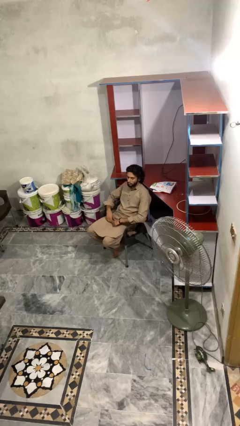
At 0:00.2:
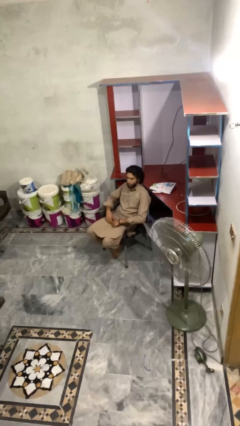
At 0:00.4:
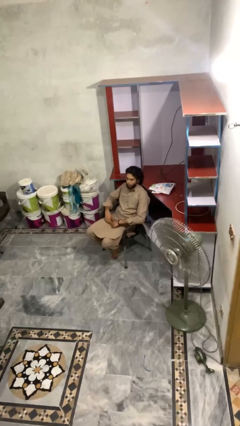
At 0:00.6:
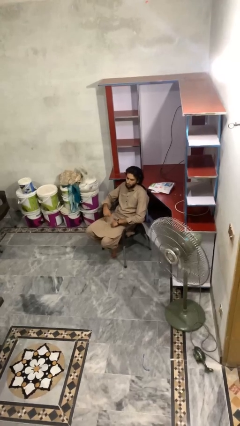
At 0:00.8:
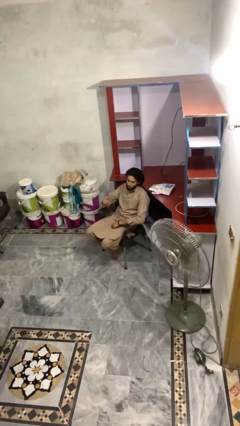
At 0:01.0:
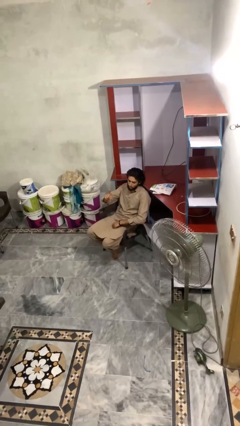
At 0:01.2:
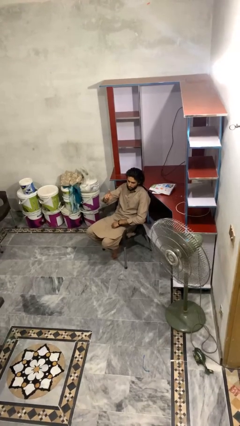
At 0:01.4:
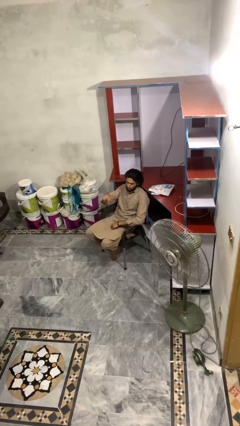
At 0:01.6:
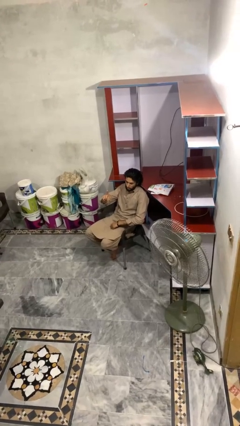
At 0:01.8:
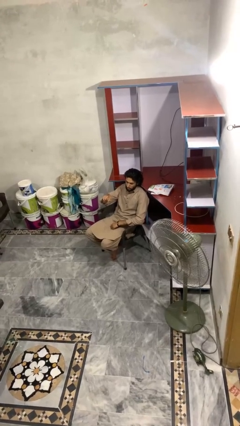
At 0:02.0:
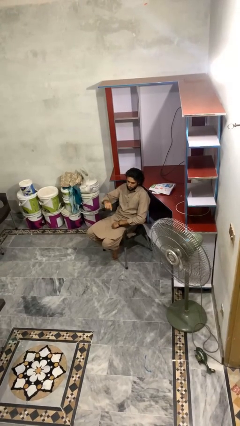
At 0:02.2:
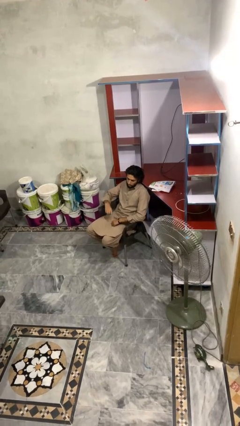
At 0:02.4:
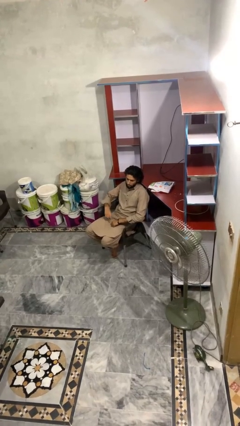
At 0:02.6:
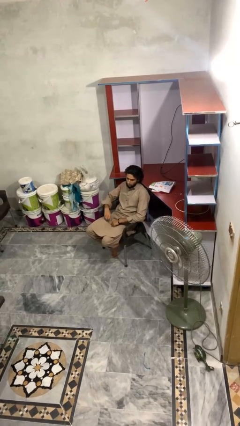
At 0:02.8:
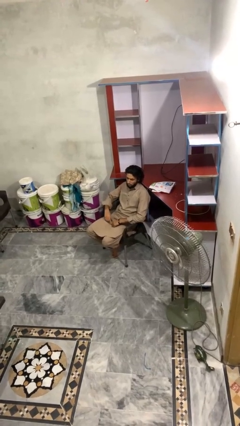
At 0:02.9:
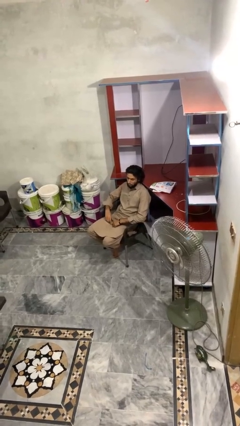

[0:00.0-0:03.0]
person gestures number one

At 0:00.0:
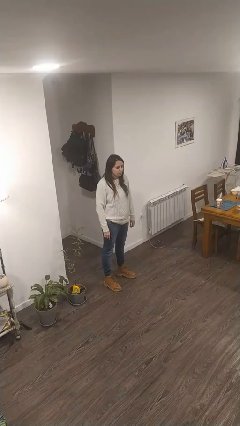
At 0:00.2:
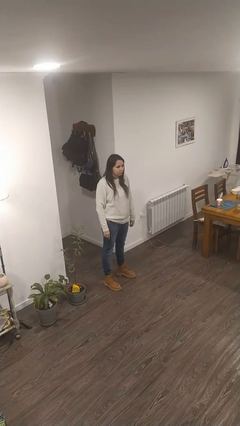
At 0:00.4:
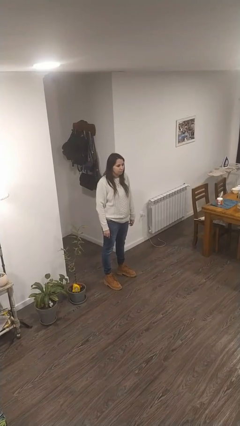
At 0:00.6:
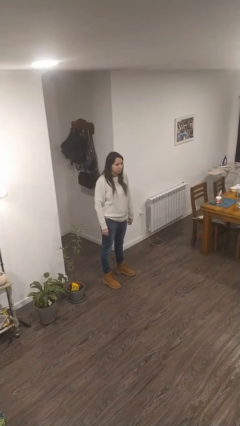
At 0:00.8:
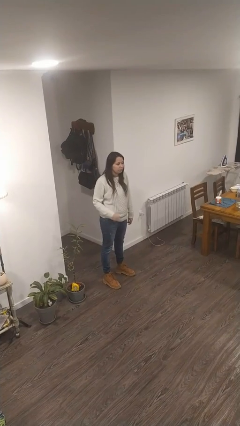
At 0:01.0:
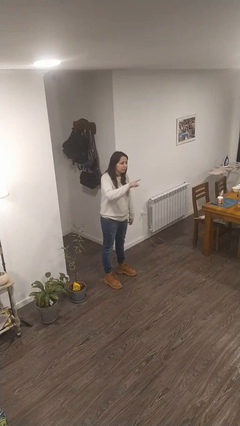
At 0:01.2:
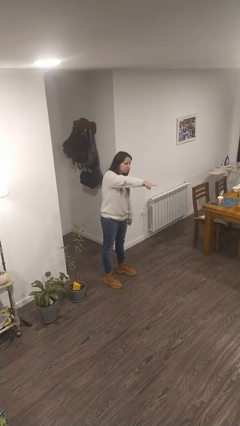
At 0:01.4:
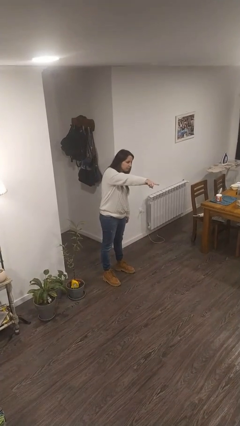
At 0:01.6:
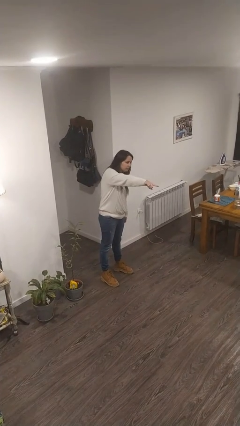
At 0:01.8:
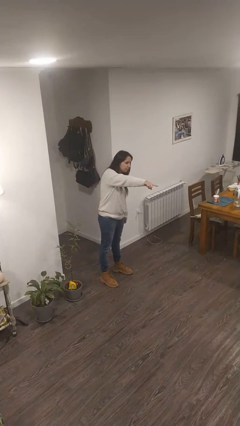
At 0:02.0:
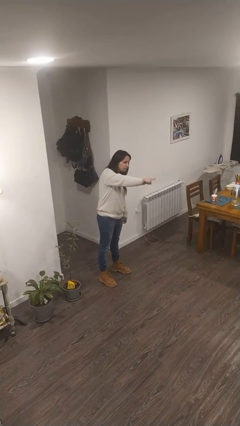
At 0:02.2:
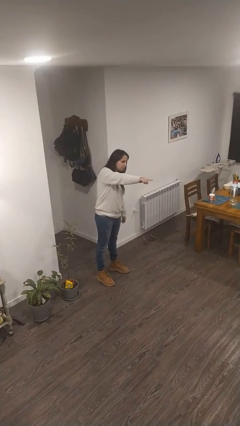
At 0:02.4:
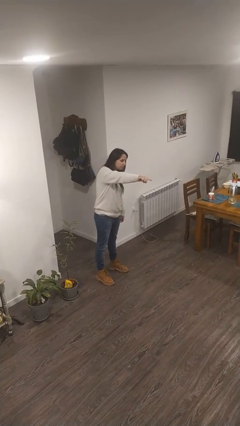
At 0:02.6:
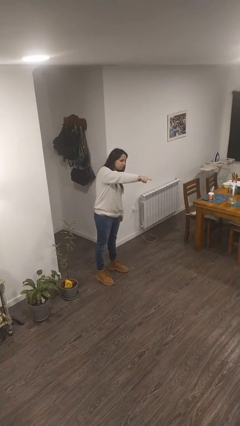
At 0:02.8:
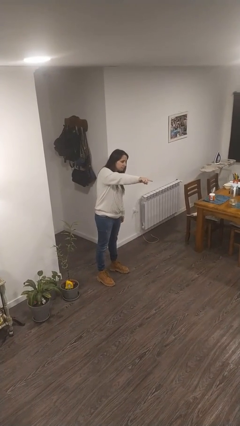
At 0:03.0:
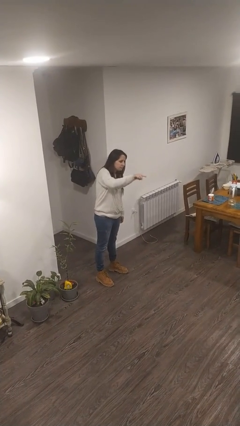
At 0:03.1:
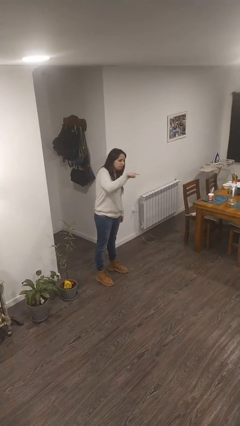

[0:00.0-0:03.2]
person points at person

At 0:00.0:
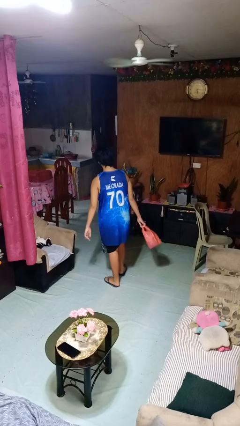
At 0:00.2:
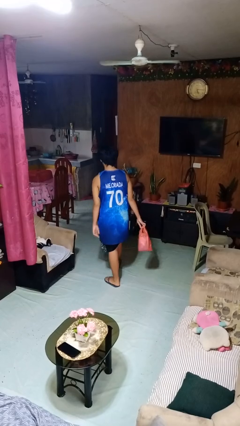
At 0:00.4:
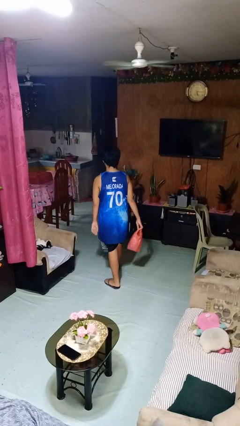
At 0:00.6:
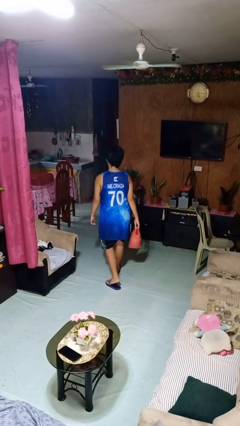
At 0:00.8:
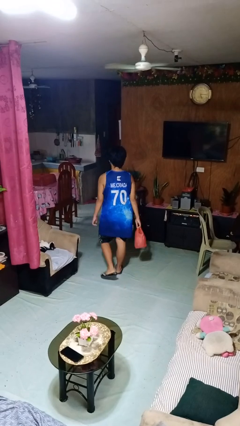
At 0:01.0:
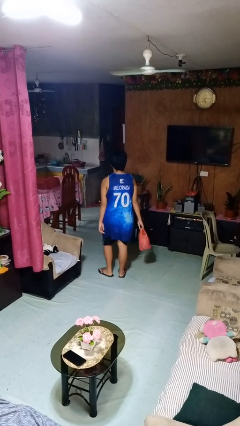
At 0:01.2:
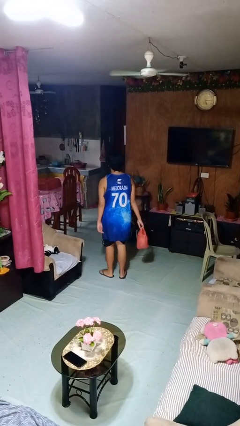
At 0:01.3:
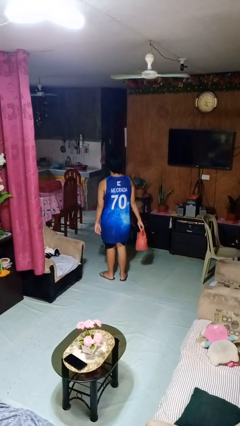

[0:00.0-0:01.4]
person carries groceries

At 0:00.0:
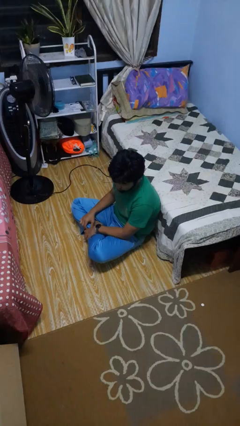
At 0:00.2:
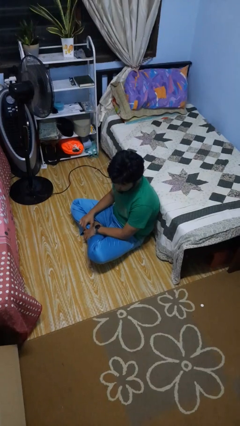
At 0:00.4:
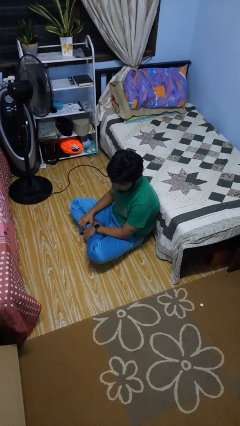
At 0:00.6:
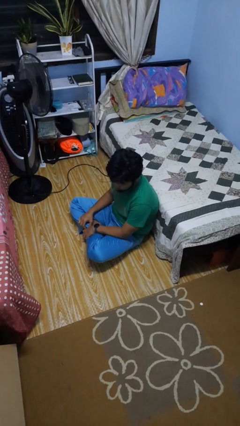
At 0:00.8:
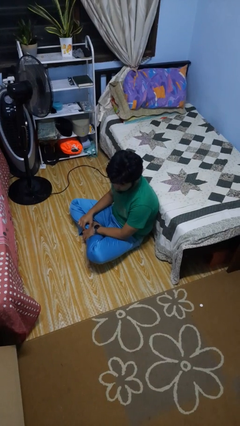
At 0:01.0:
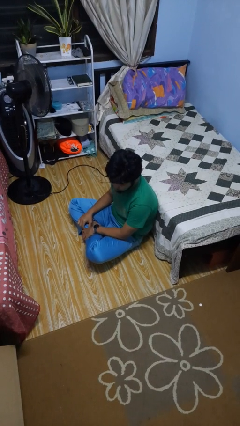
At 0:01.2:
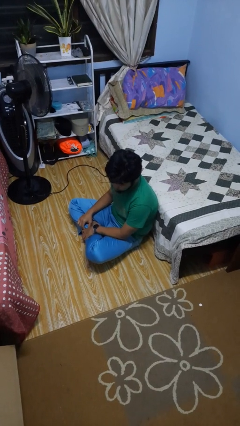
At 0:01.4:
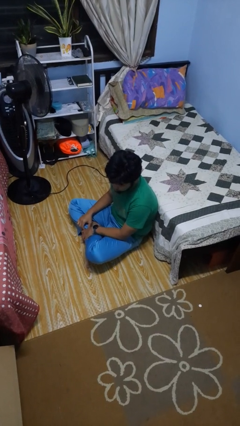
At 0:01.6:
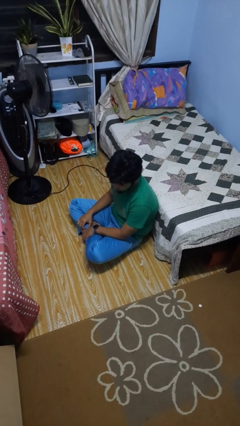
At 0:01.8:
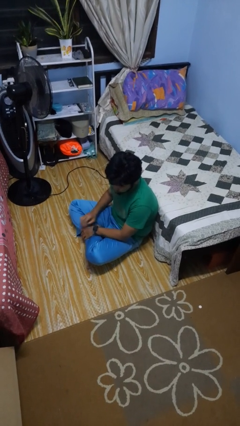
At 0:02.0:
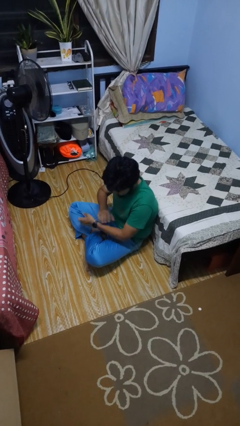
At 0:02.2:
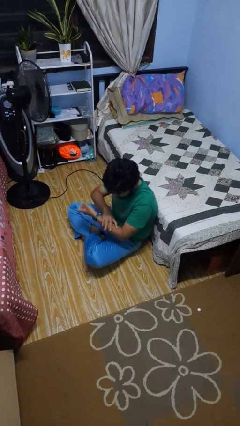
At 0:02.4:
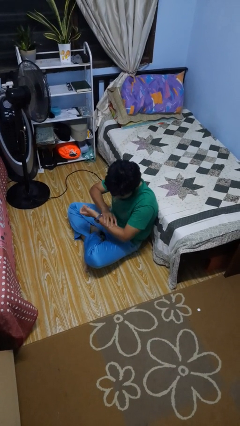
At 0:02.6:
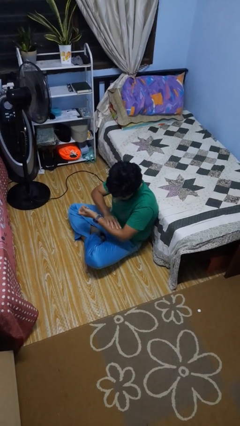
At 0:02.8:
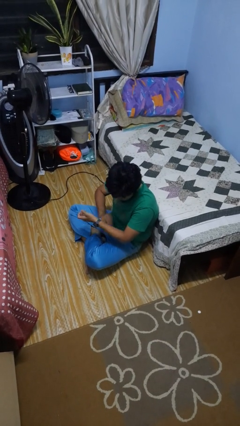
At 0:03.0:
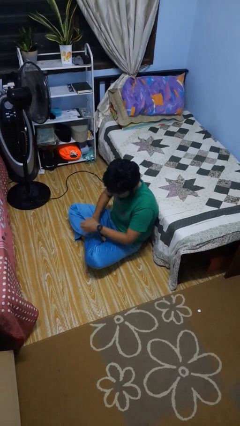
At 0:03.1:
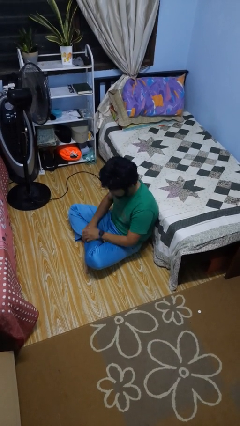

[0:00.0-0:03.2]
person looks at hands in lap

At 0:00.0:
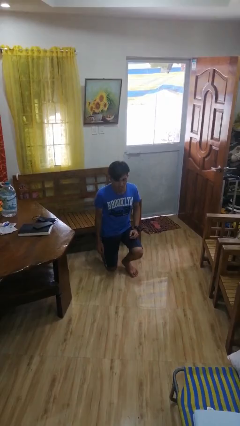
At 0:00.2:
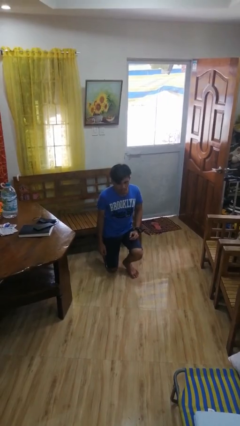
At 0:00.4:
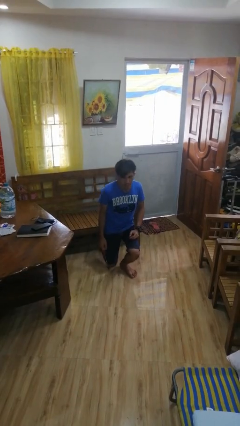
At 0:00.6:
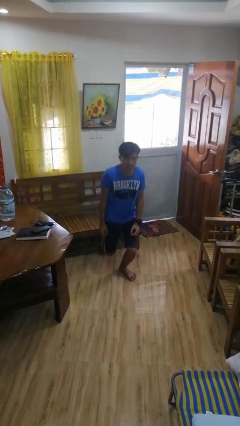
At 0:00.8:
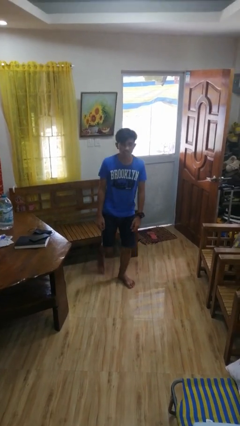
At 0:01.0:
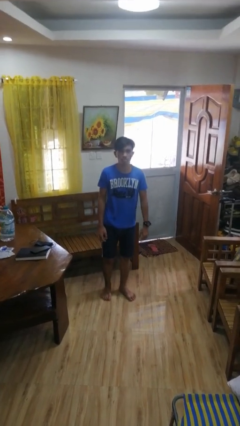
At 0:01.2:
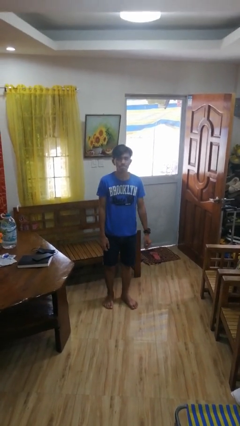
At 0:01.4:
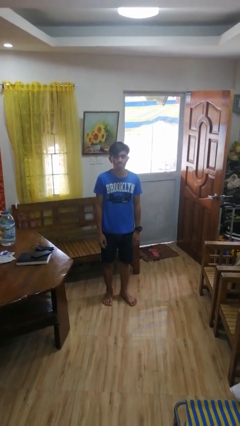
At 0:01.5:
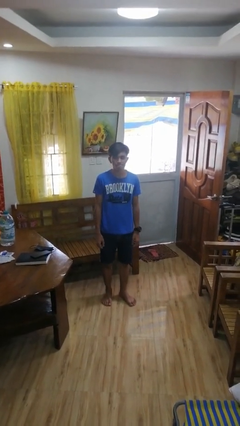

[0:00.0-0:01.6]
person stands up from floor

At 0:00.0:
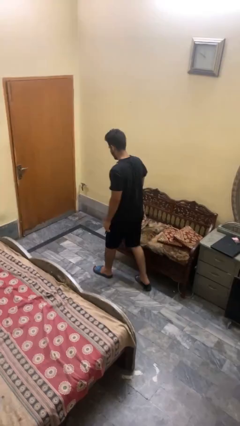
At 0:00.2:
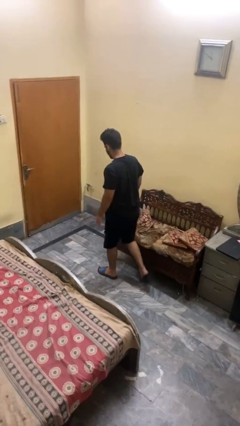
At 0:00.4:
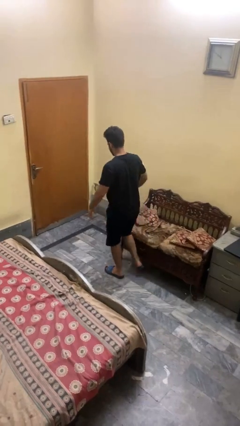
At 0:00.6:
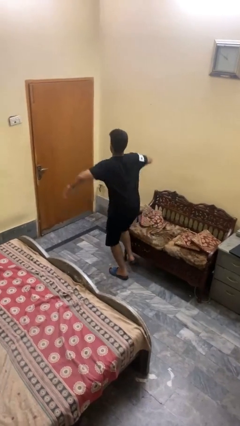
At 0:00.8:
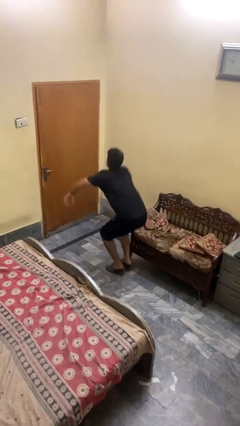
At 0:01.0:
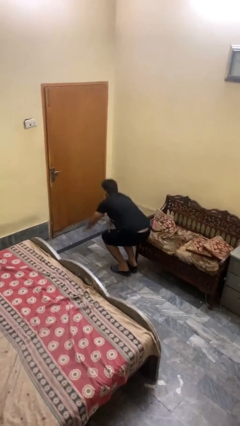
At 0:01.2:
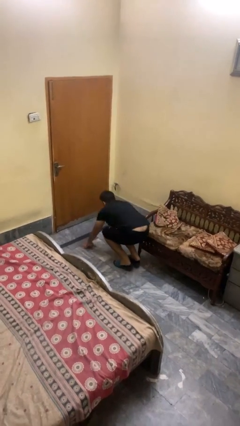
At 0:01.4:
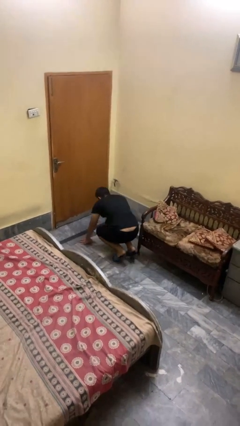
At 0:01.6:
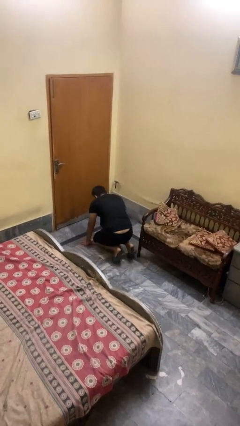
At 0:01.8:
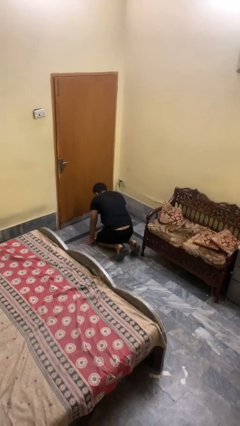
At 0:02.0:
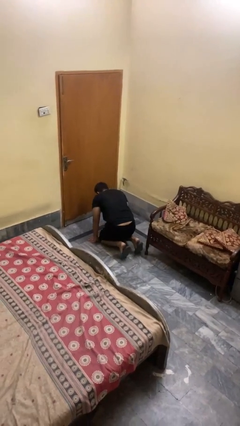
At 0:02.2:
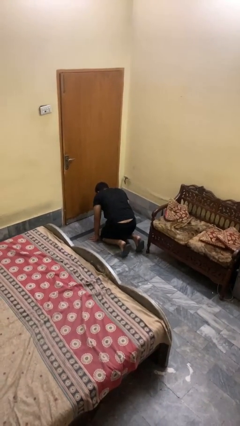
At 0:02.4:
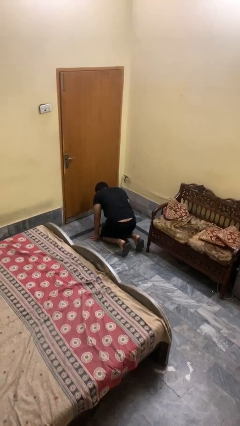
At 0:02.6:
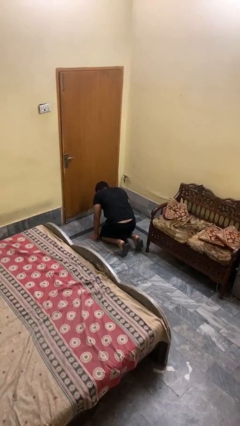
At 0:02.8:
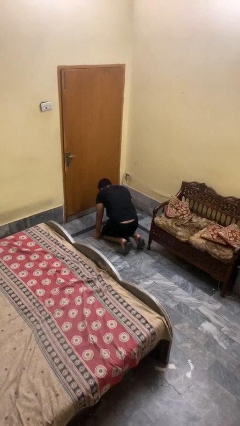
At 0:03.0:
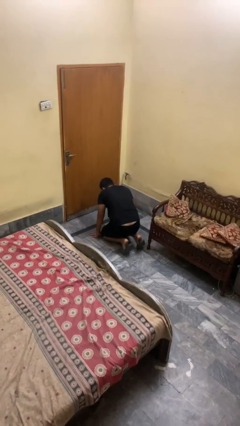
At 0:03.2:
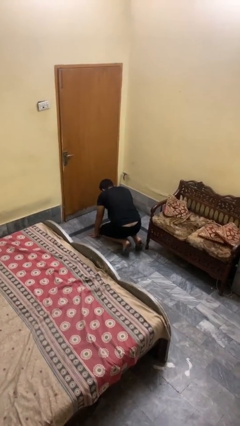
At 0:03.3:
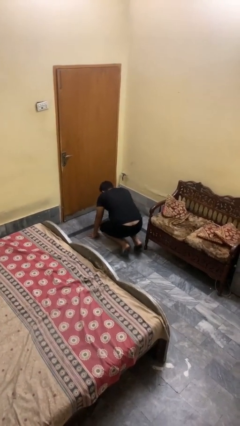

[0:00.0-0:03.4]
person trips on object on floor

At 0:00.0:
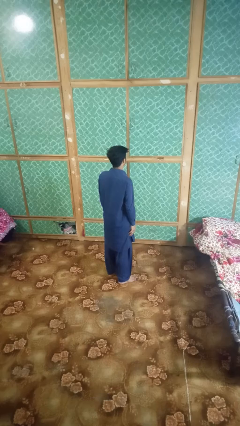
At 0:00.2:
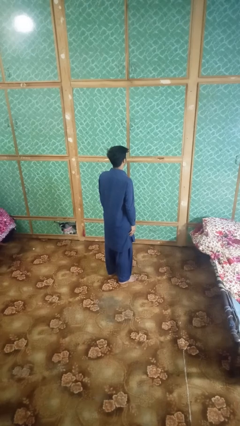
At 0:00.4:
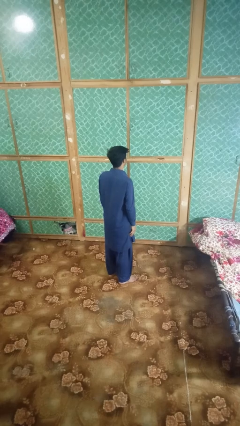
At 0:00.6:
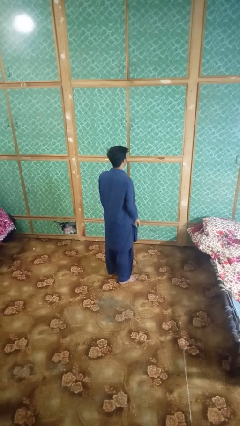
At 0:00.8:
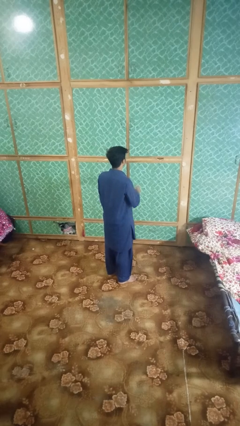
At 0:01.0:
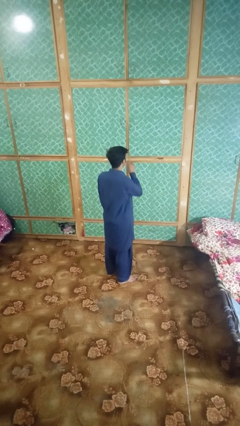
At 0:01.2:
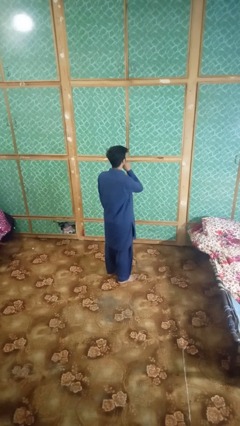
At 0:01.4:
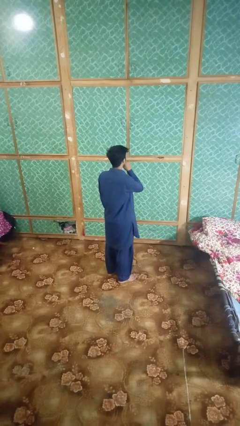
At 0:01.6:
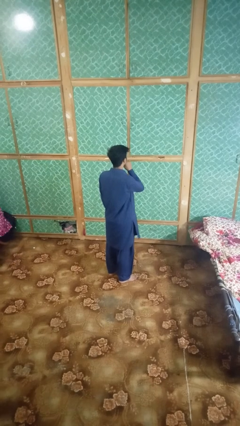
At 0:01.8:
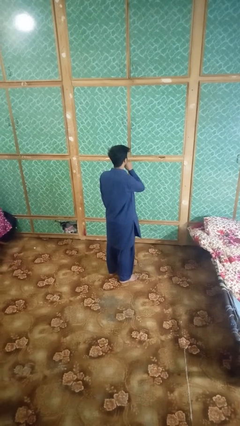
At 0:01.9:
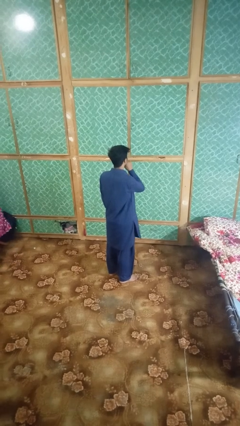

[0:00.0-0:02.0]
person gestures be quiet
